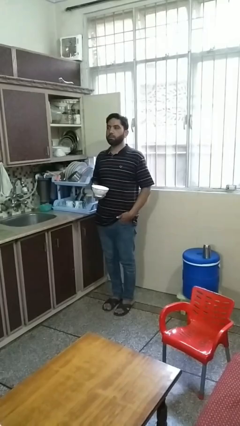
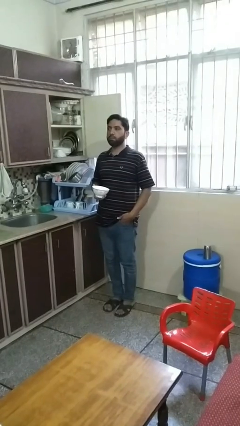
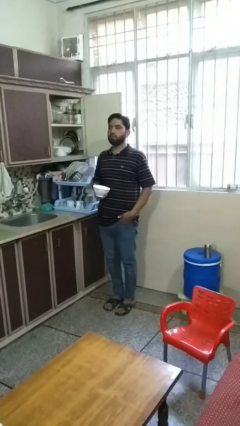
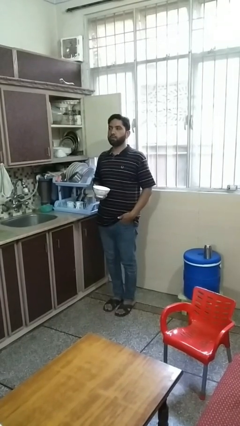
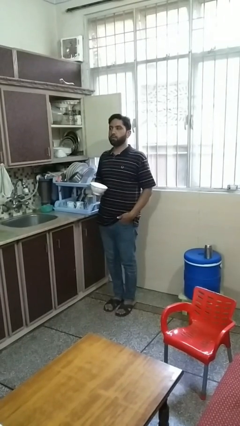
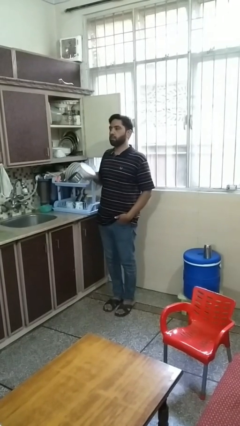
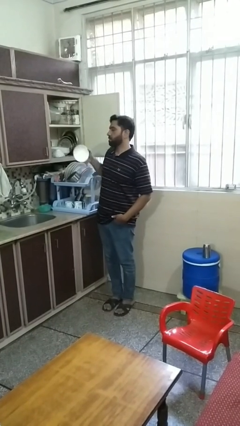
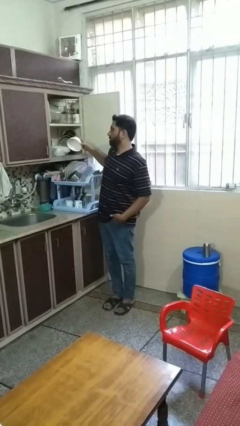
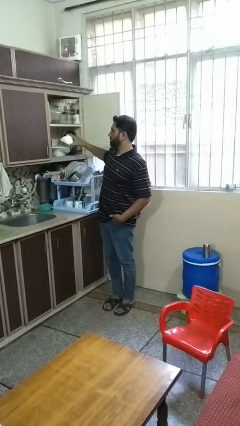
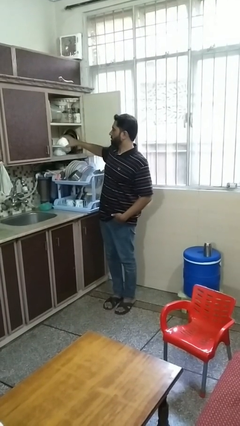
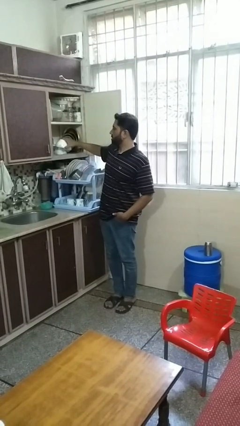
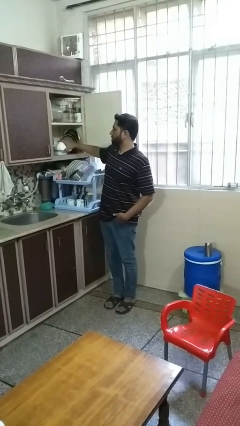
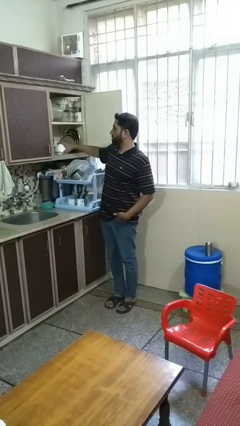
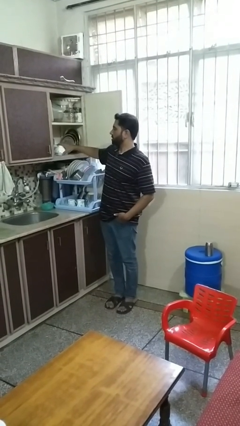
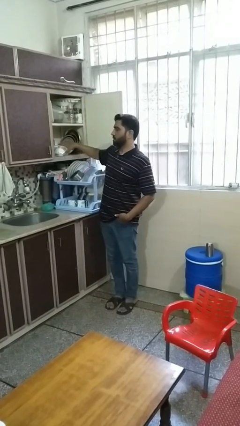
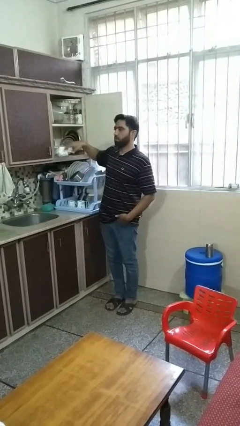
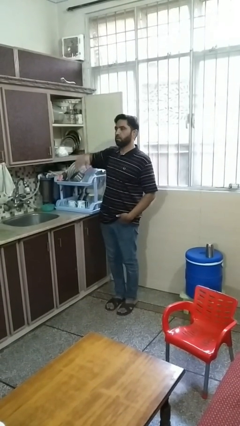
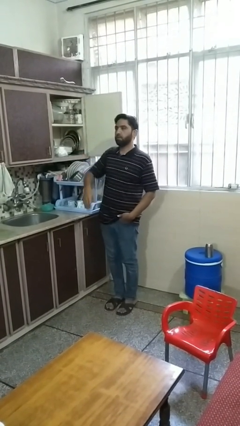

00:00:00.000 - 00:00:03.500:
person puts object in cabinet

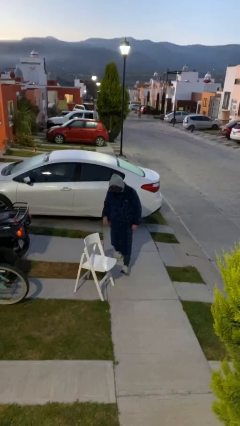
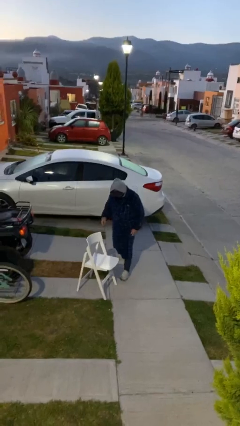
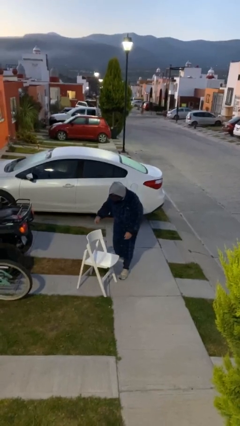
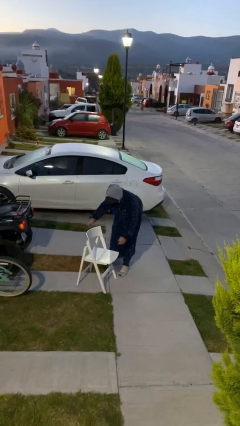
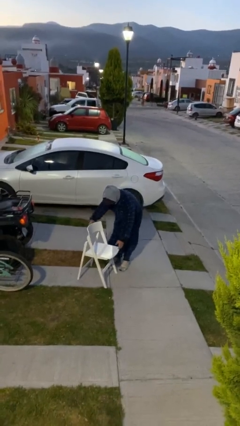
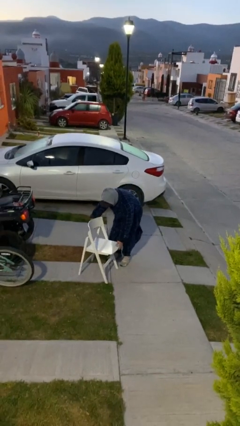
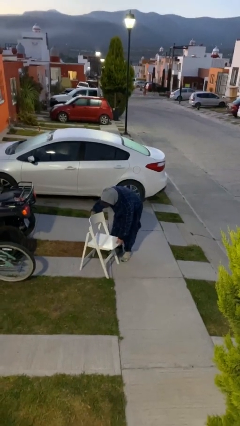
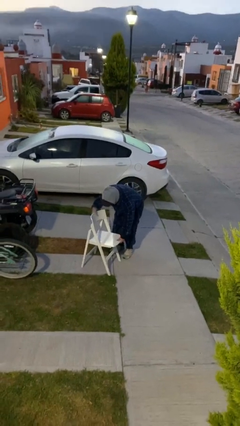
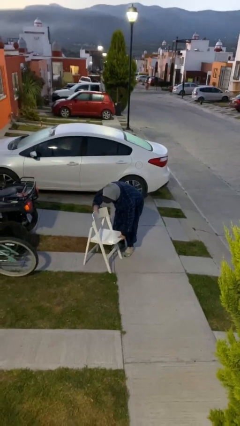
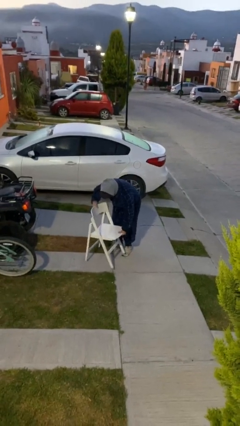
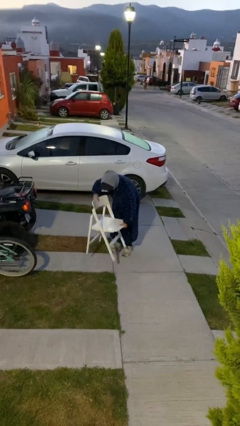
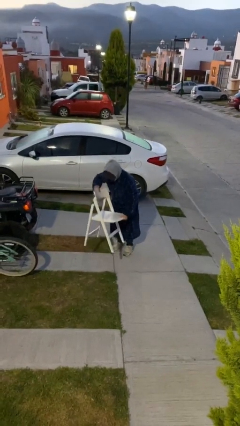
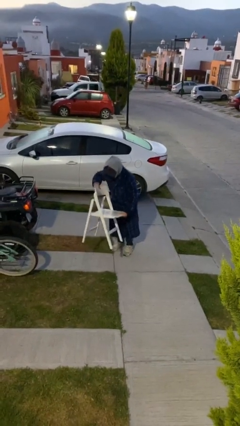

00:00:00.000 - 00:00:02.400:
person picks up object from floor

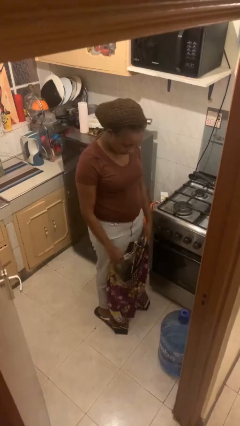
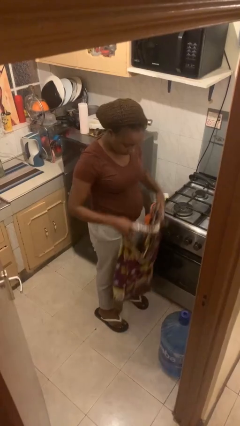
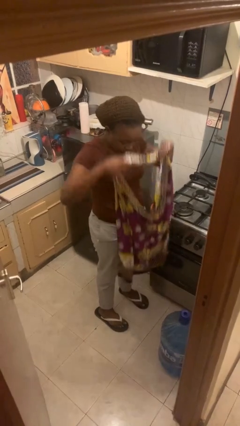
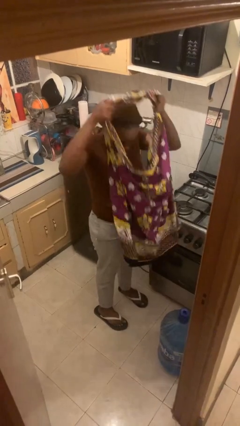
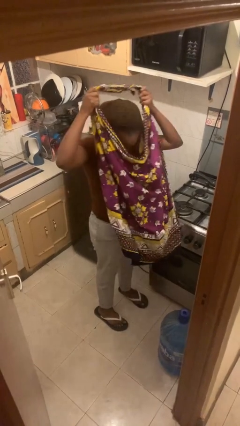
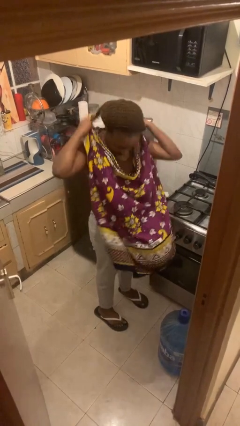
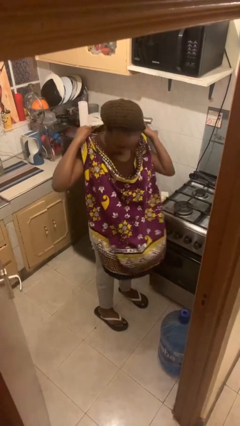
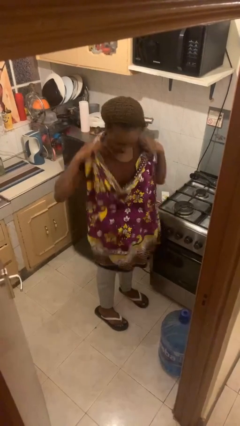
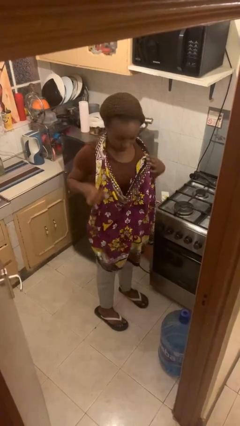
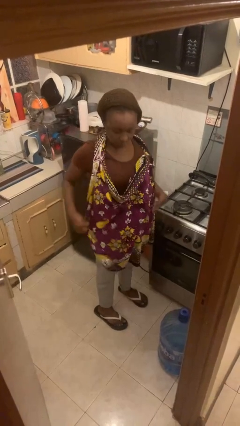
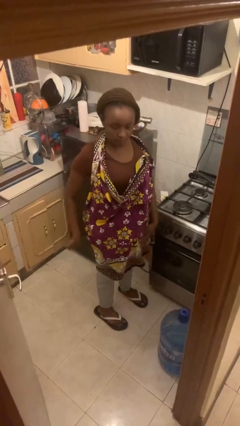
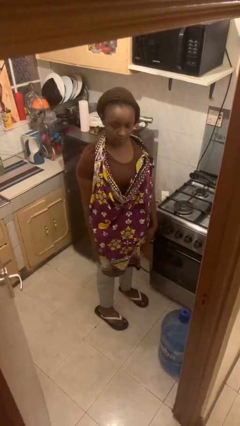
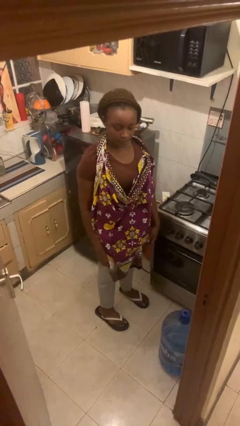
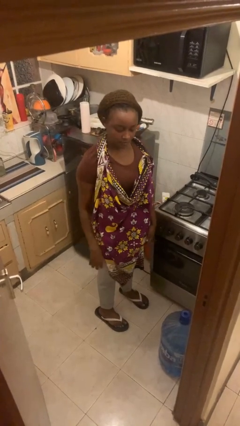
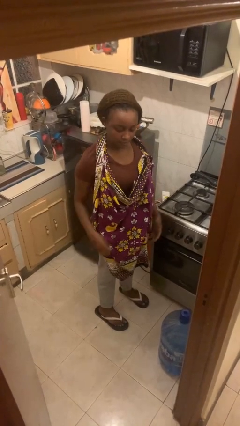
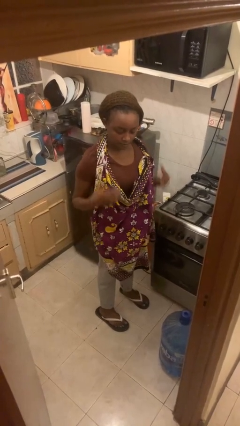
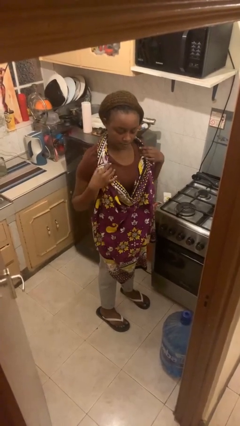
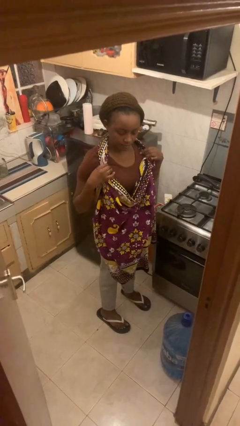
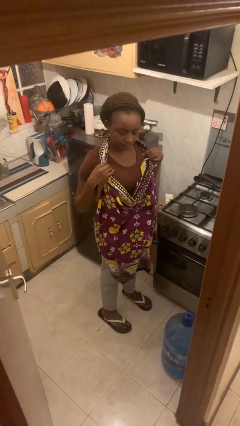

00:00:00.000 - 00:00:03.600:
person puts on apron

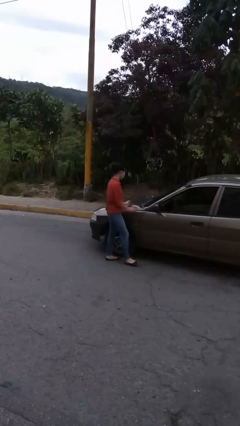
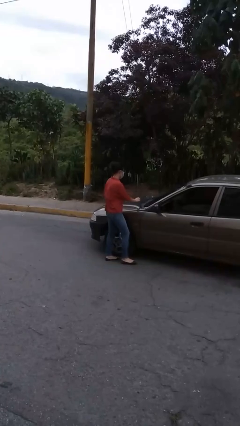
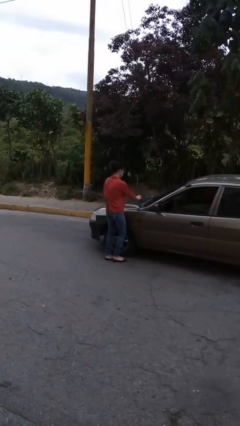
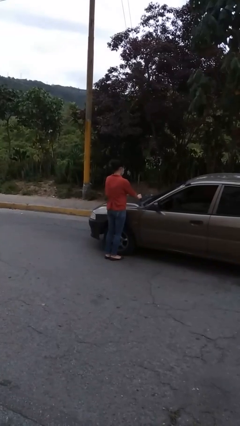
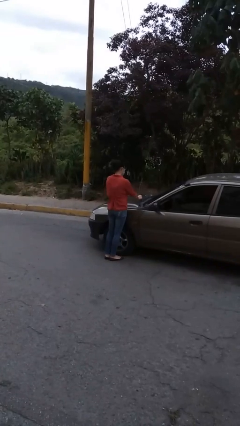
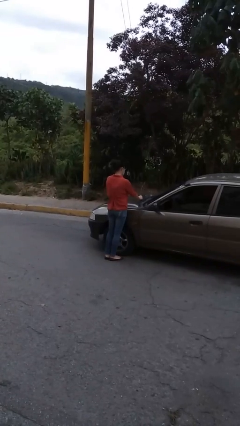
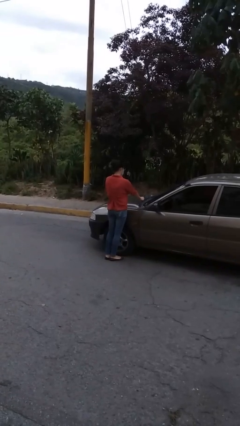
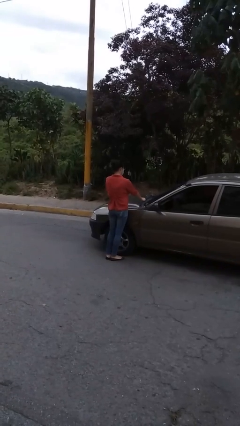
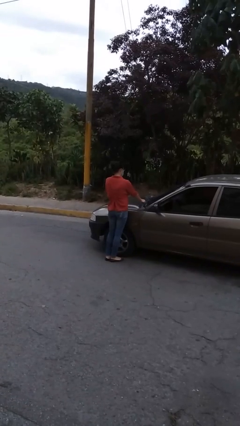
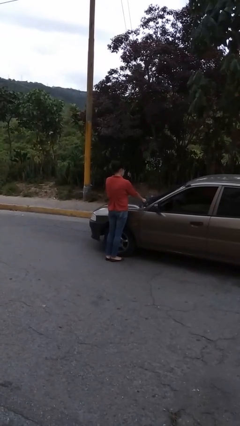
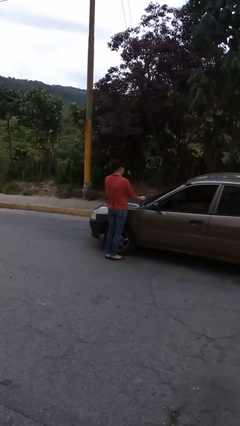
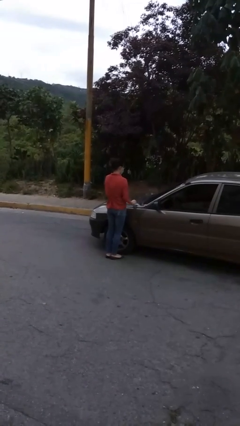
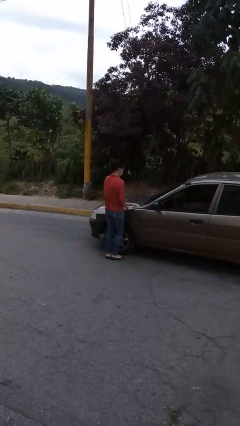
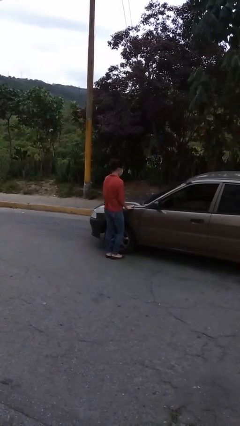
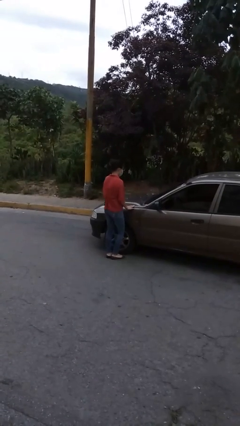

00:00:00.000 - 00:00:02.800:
person flips down car wipers

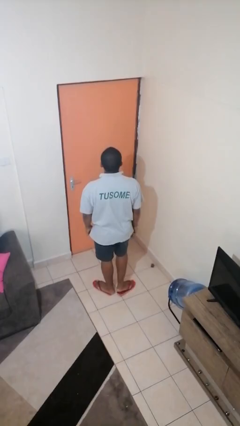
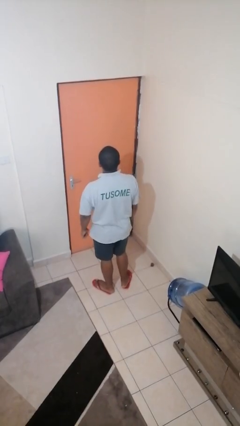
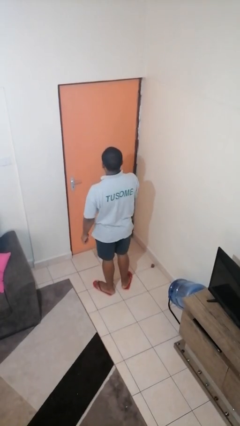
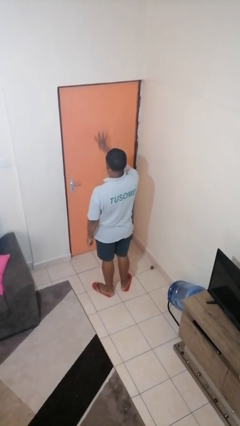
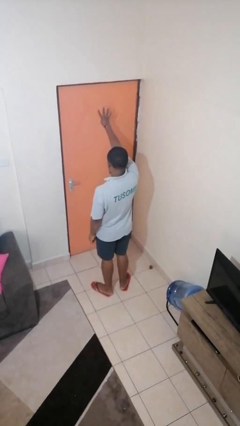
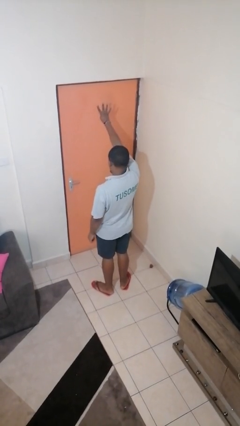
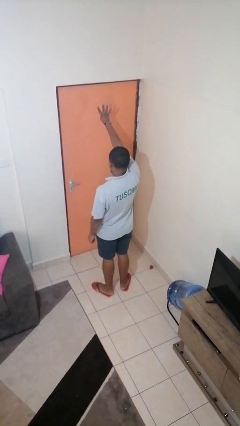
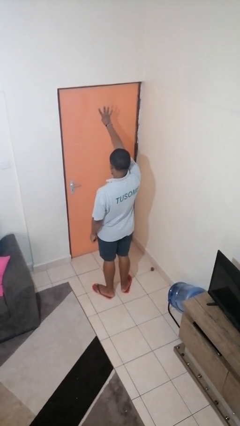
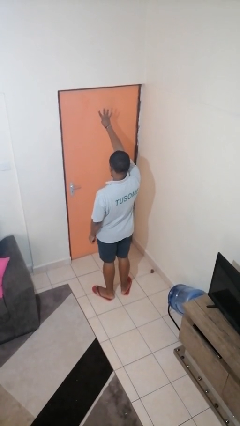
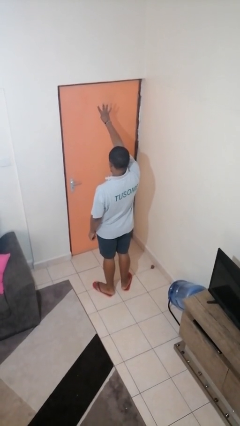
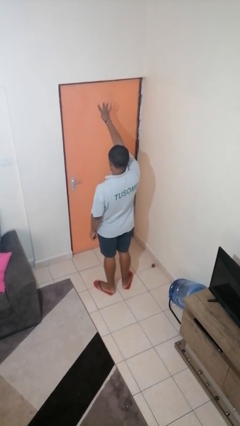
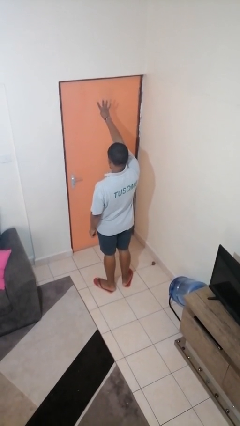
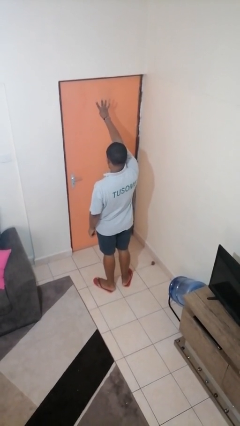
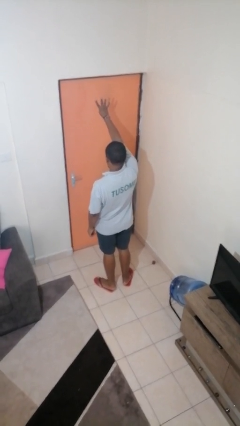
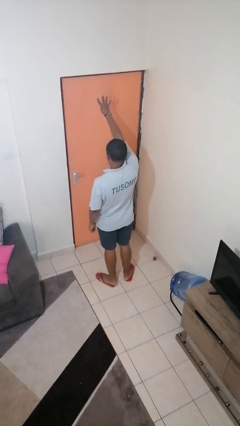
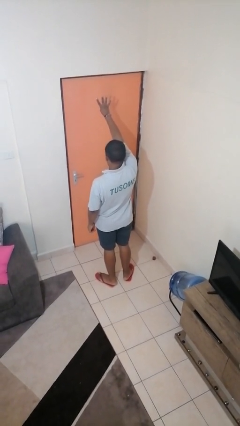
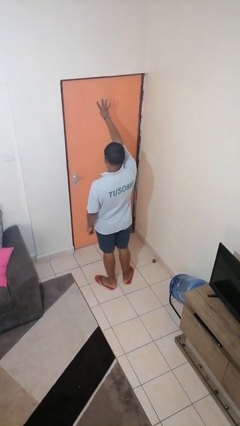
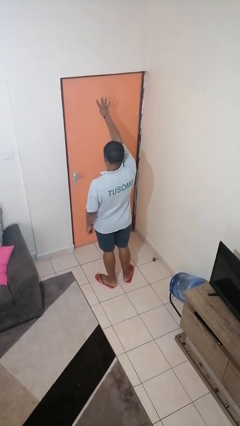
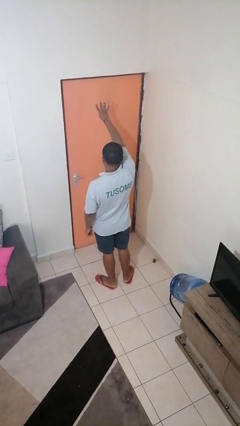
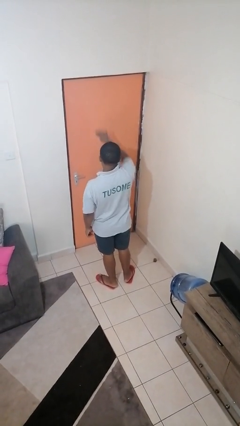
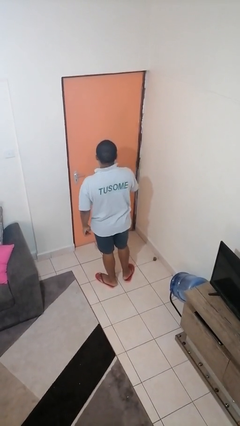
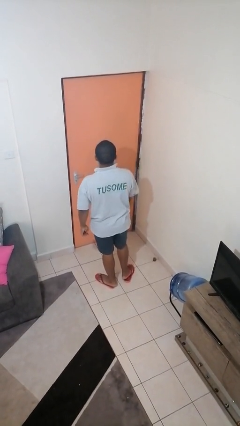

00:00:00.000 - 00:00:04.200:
person gestures number four

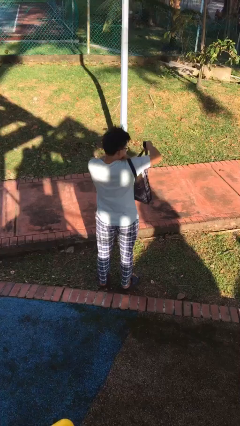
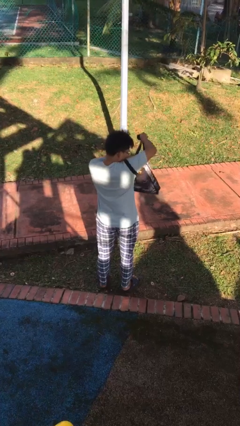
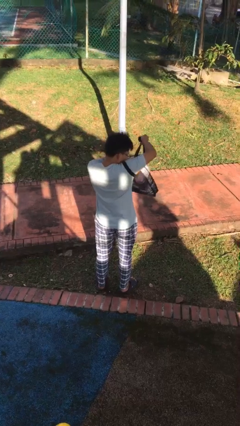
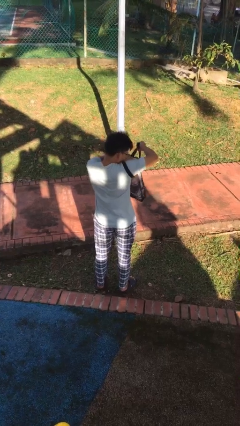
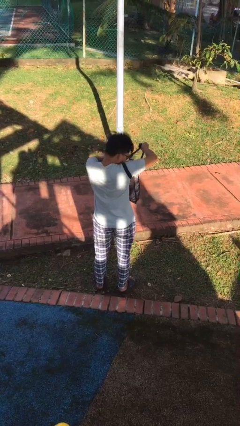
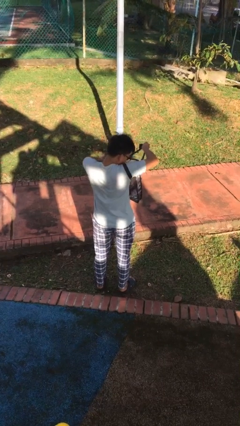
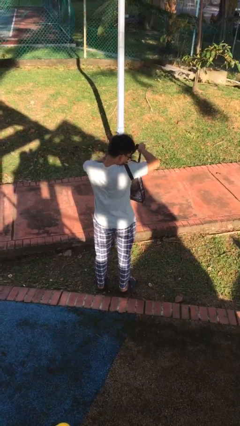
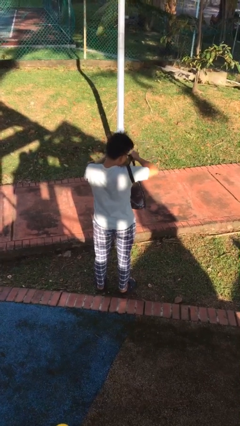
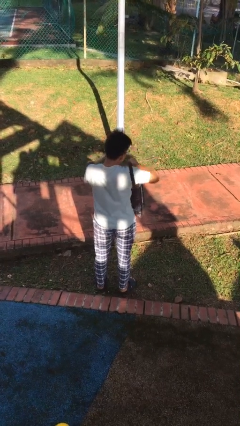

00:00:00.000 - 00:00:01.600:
person searches in bag
